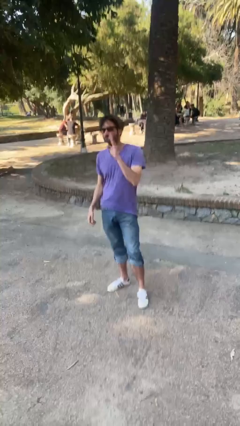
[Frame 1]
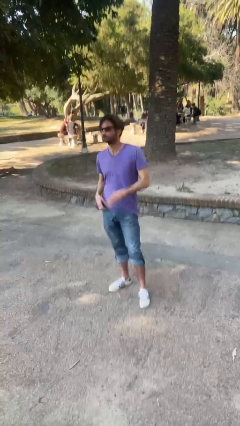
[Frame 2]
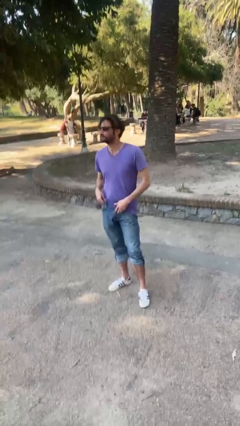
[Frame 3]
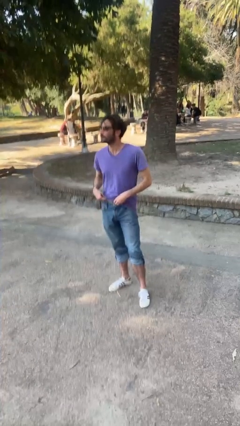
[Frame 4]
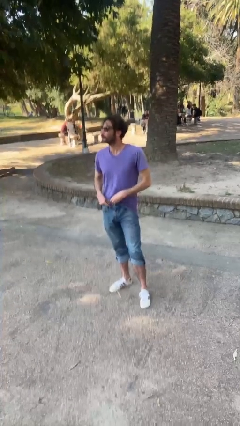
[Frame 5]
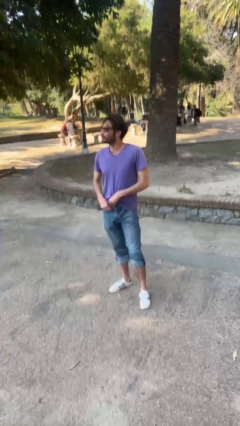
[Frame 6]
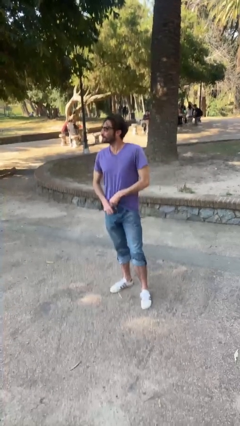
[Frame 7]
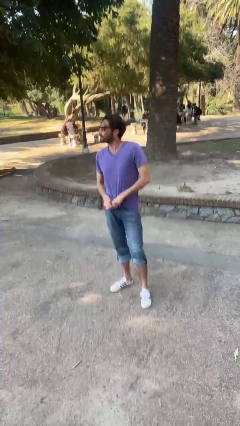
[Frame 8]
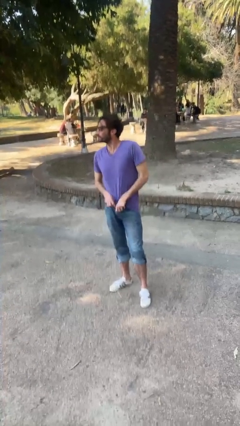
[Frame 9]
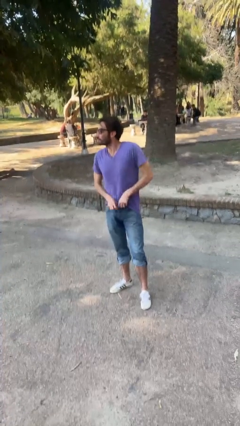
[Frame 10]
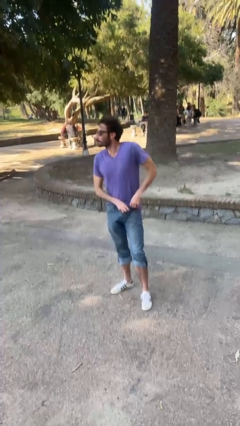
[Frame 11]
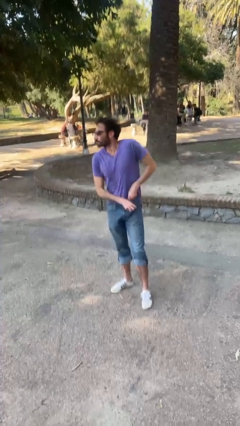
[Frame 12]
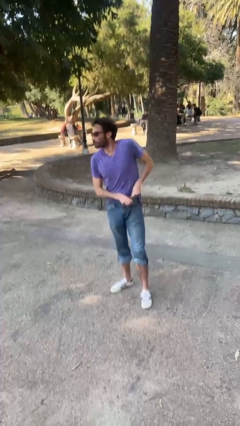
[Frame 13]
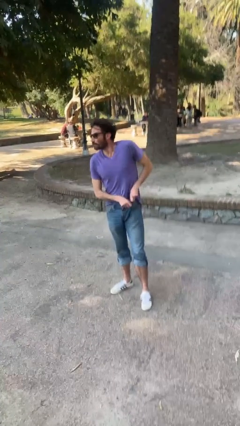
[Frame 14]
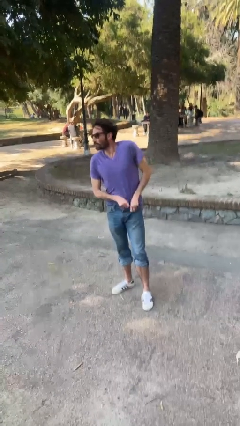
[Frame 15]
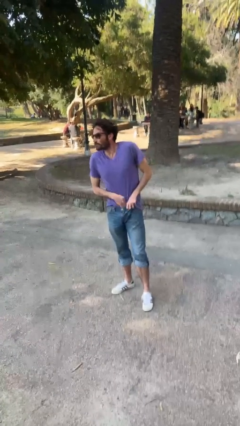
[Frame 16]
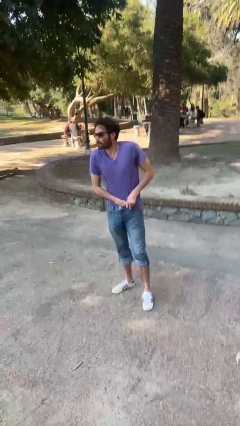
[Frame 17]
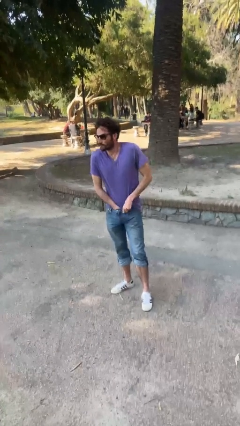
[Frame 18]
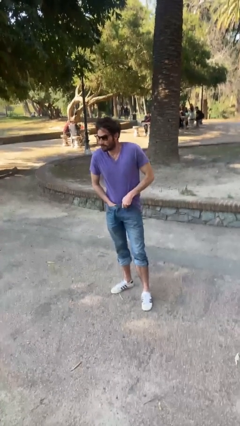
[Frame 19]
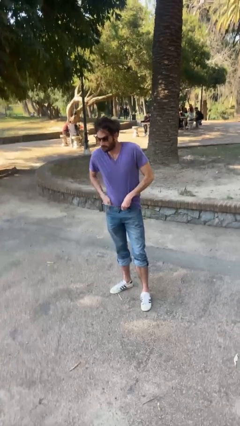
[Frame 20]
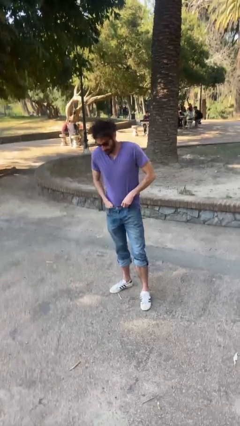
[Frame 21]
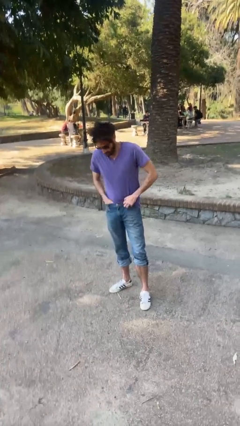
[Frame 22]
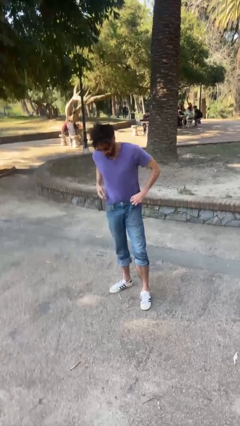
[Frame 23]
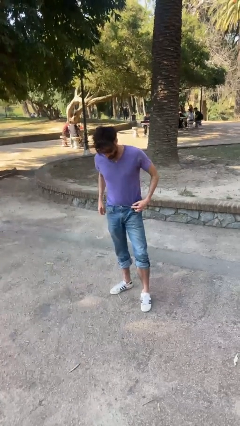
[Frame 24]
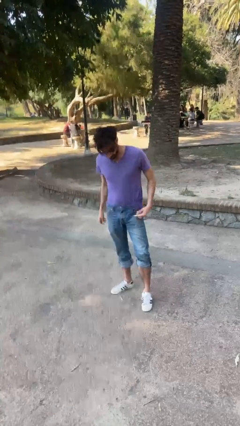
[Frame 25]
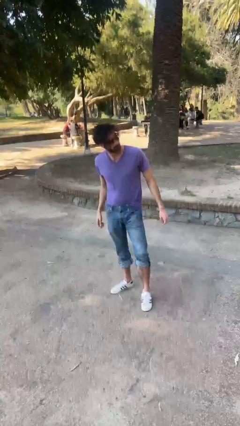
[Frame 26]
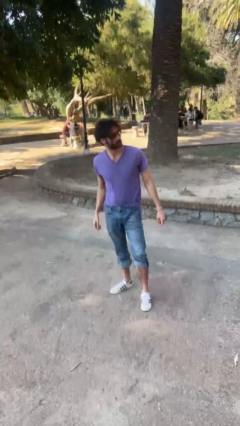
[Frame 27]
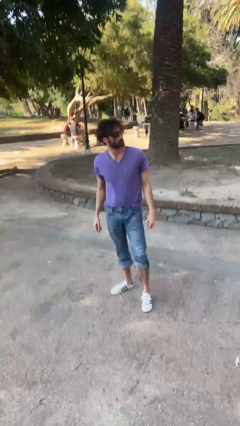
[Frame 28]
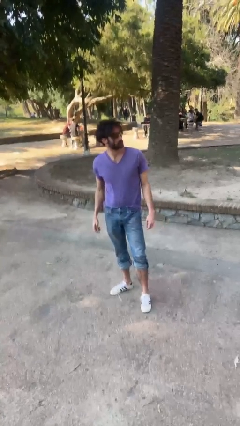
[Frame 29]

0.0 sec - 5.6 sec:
person tucks in shirt

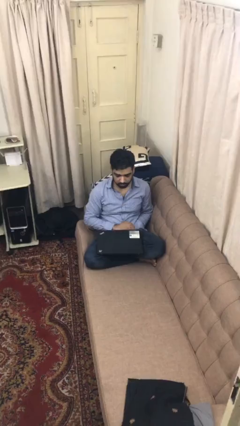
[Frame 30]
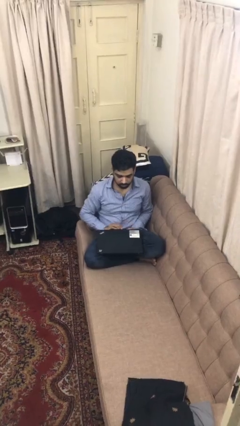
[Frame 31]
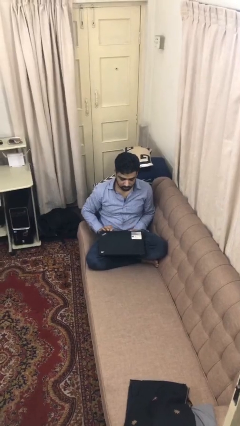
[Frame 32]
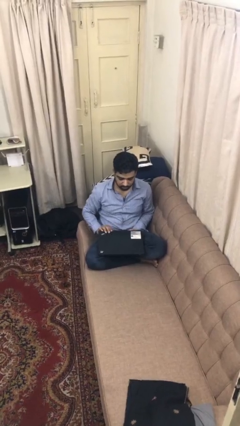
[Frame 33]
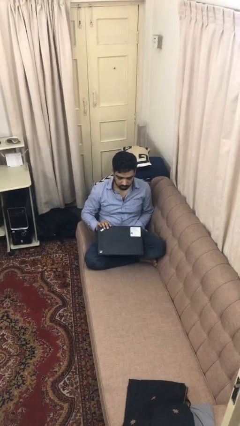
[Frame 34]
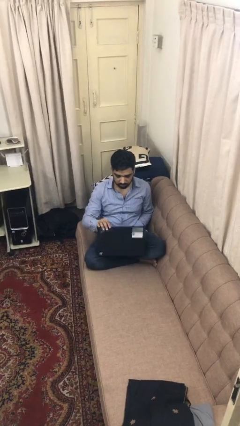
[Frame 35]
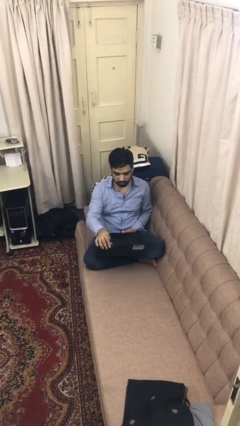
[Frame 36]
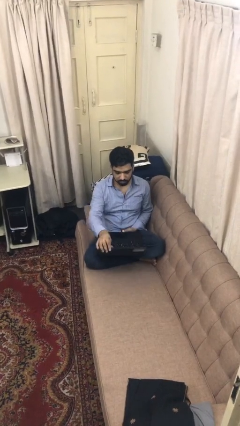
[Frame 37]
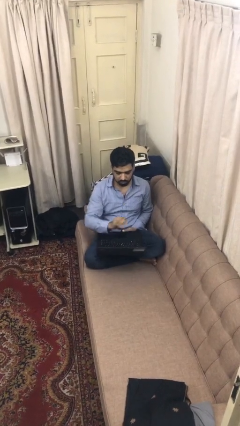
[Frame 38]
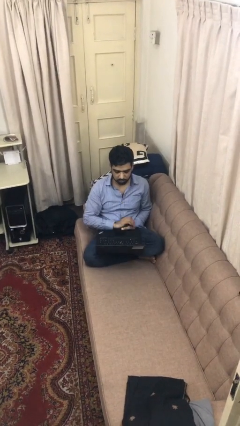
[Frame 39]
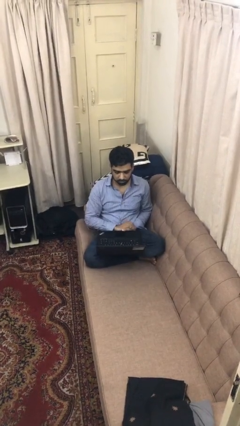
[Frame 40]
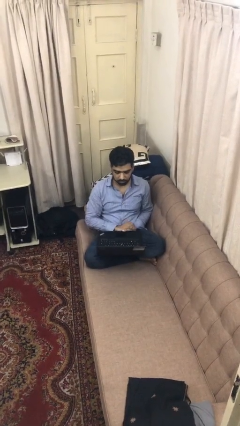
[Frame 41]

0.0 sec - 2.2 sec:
person opens laptop

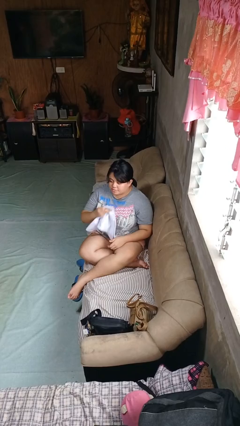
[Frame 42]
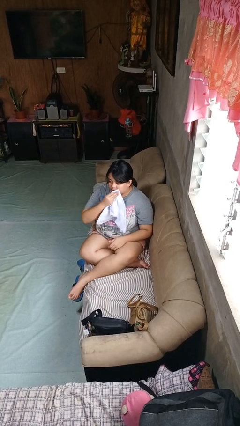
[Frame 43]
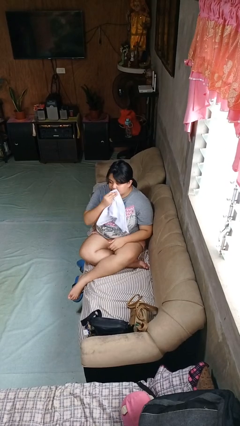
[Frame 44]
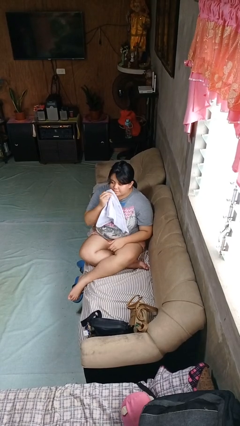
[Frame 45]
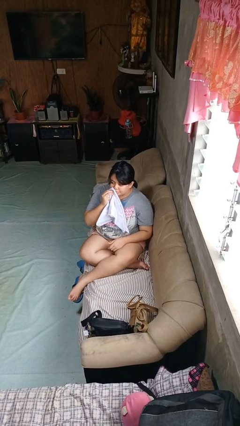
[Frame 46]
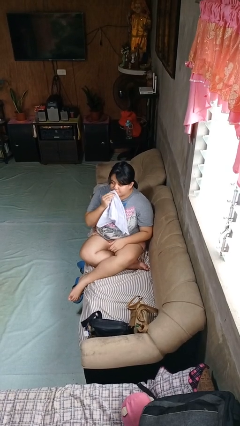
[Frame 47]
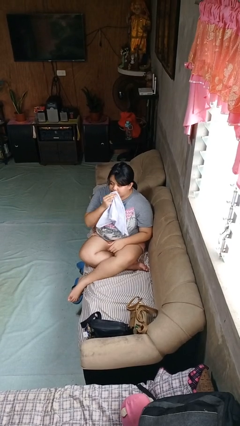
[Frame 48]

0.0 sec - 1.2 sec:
person wipes mouth with napkin

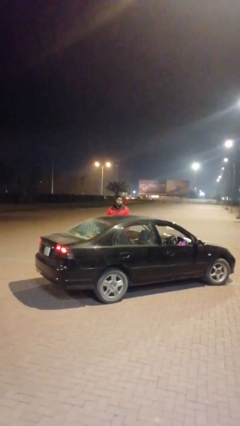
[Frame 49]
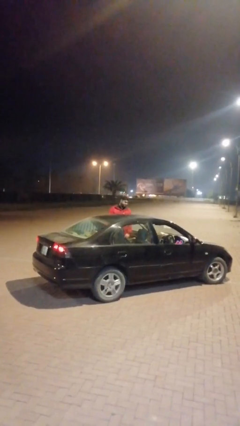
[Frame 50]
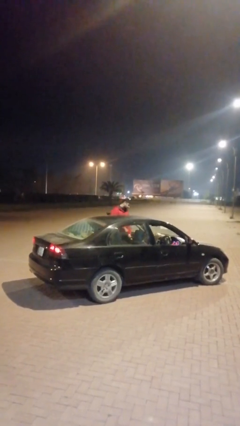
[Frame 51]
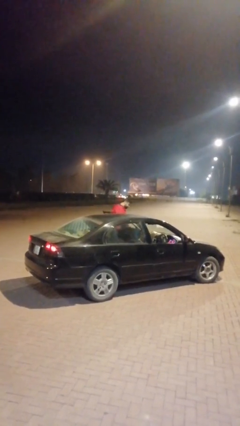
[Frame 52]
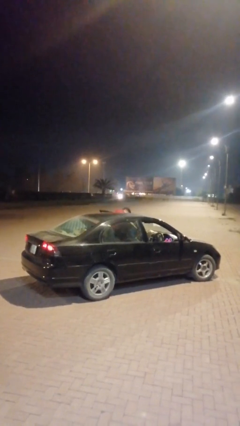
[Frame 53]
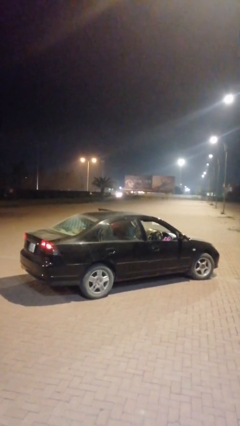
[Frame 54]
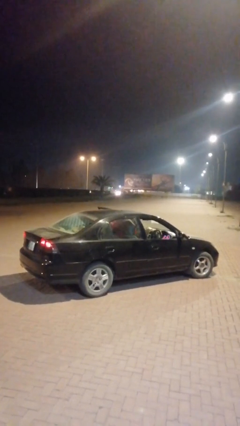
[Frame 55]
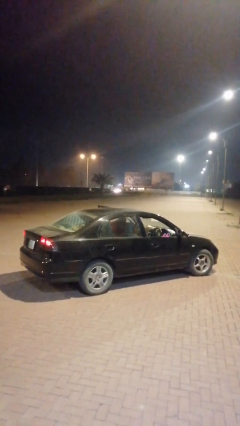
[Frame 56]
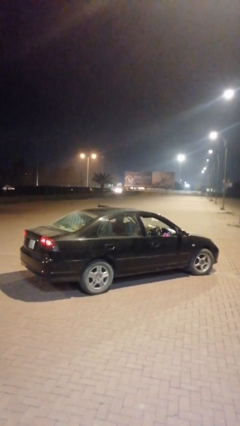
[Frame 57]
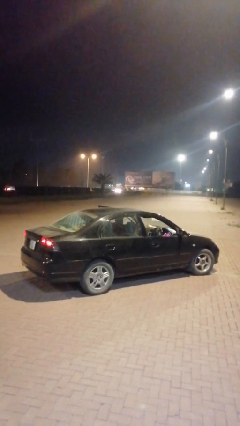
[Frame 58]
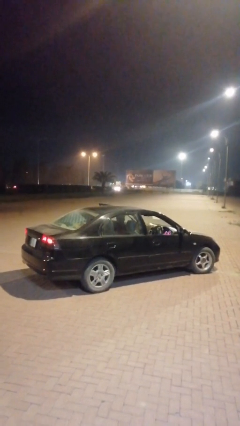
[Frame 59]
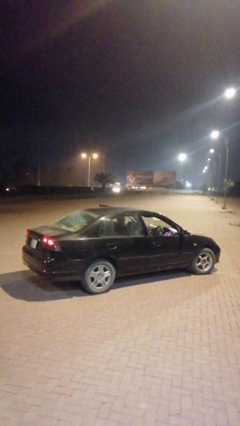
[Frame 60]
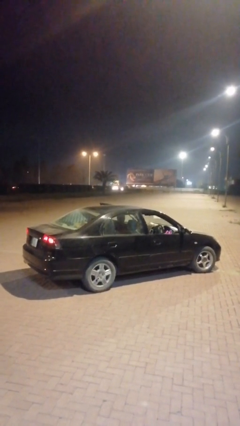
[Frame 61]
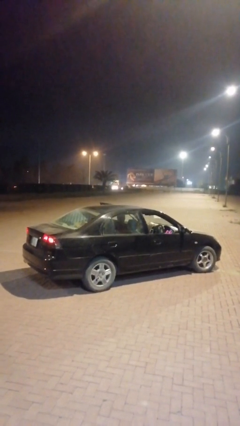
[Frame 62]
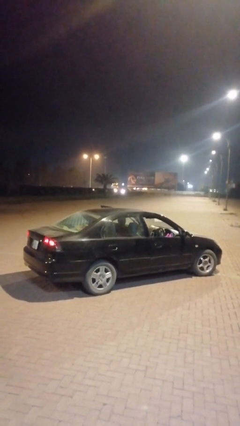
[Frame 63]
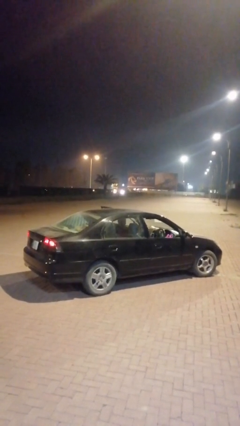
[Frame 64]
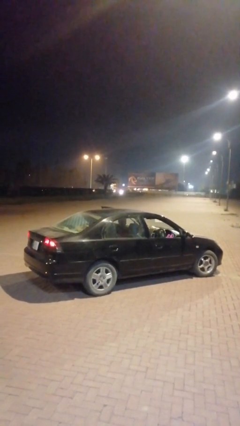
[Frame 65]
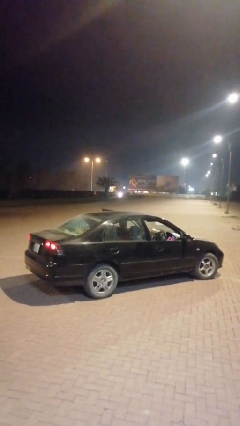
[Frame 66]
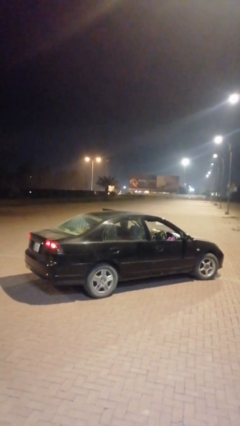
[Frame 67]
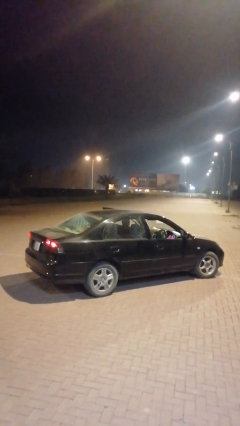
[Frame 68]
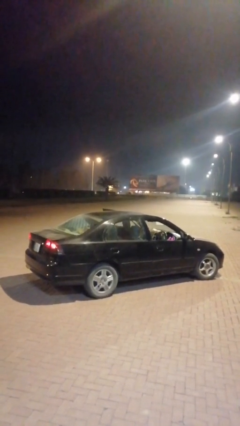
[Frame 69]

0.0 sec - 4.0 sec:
person enters car

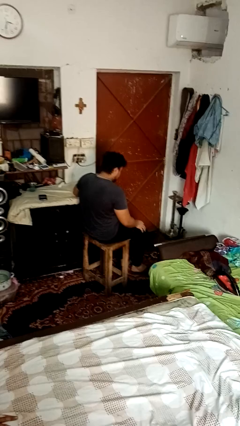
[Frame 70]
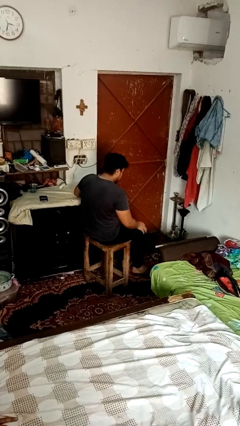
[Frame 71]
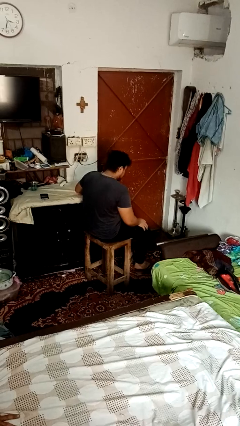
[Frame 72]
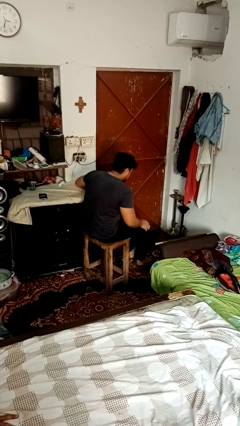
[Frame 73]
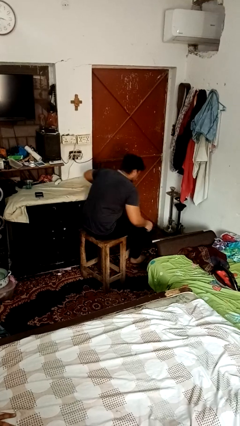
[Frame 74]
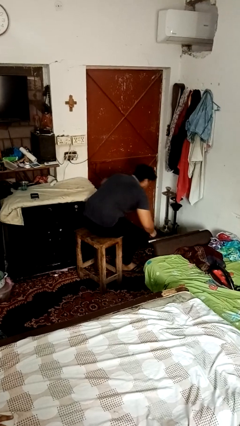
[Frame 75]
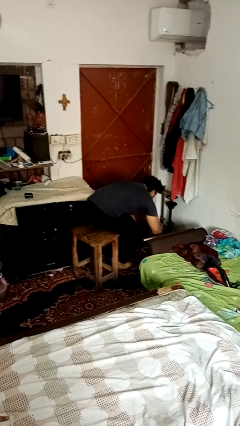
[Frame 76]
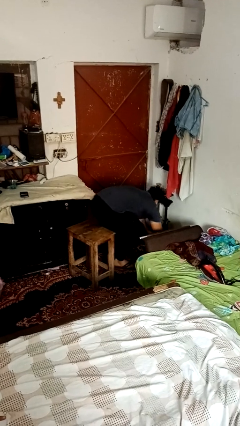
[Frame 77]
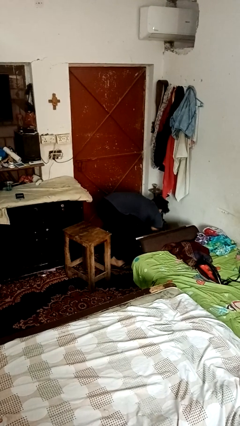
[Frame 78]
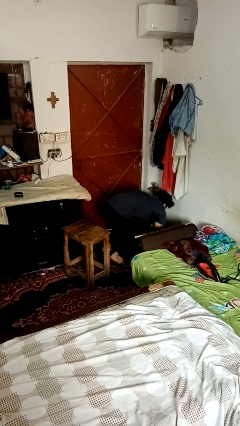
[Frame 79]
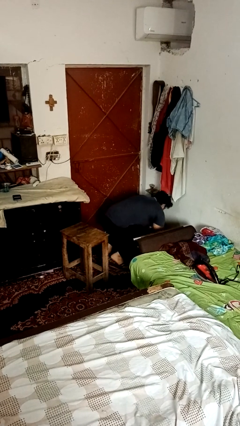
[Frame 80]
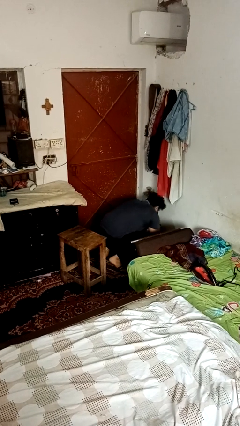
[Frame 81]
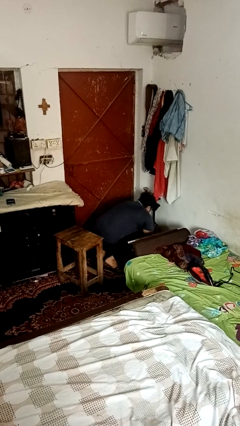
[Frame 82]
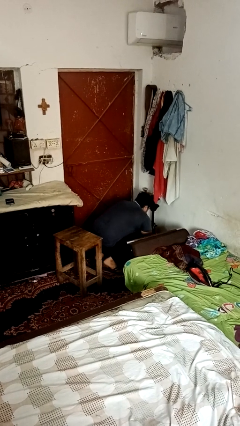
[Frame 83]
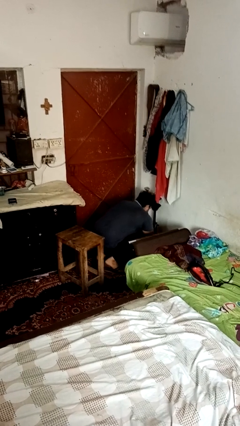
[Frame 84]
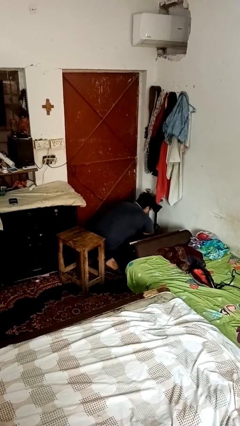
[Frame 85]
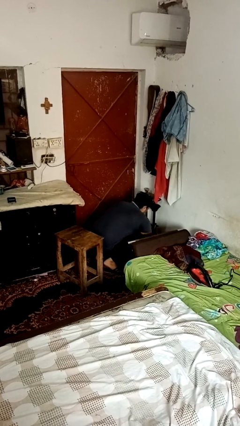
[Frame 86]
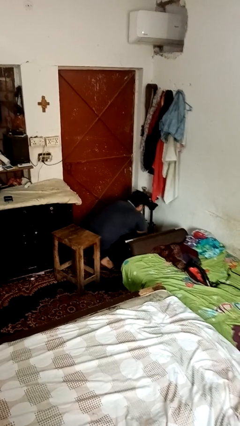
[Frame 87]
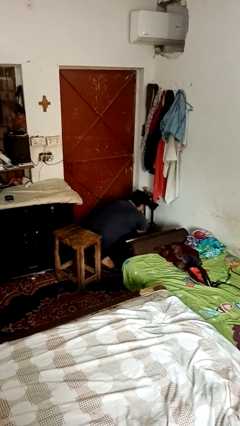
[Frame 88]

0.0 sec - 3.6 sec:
person falls from chair

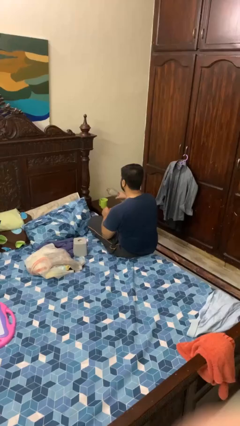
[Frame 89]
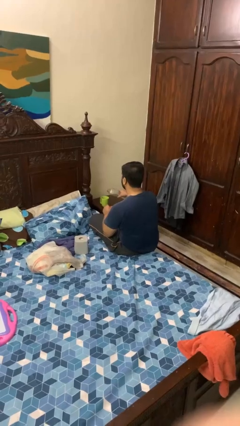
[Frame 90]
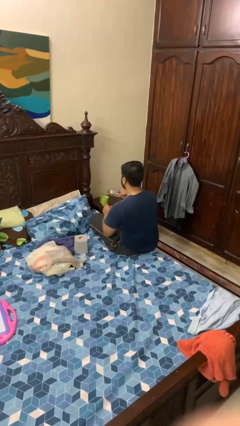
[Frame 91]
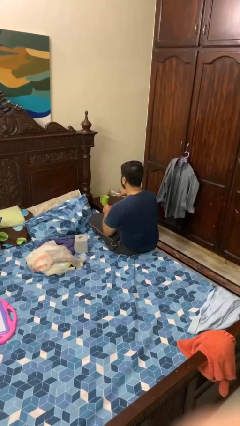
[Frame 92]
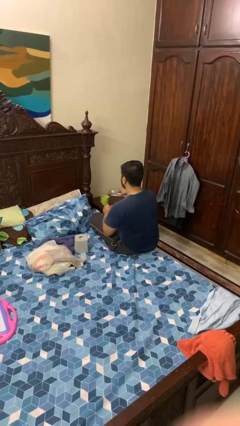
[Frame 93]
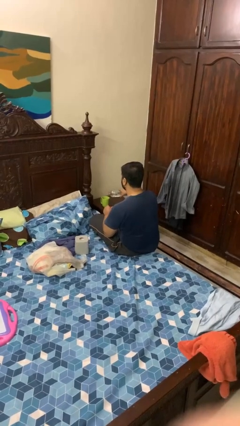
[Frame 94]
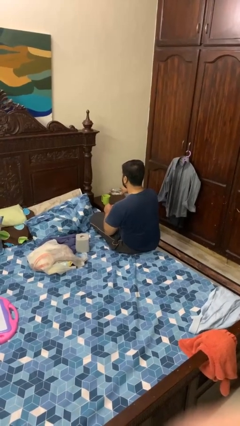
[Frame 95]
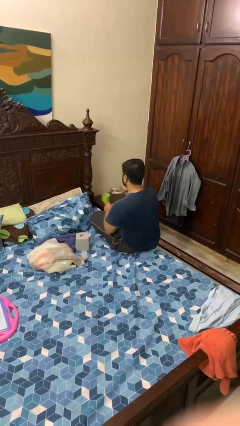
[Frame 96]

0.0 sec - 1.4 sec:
person pours liquid into cup
